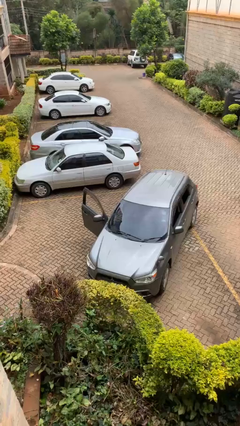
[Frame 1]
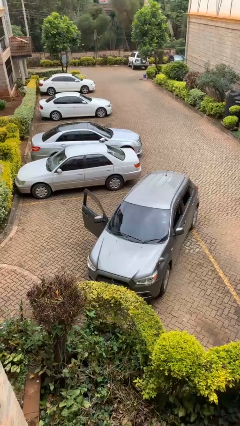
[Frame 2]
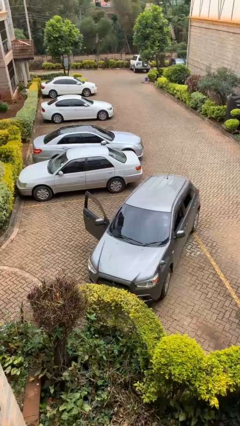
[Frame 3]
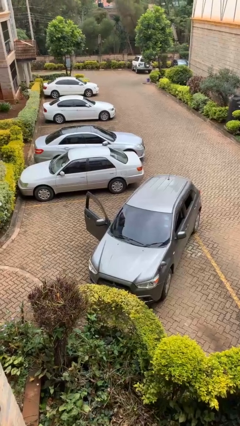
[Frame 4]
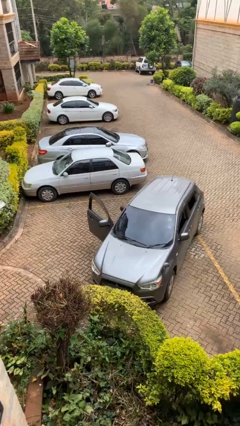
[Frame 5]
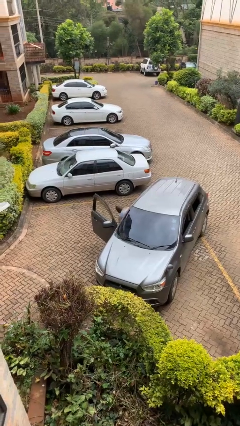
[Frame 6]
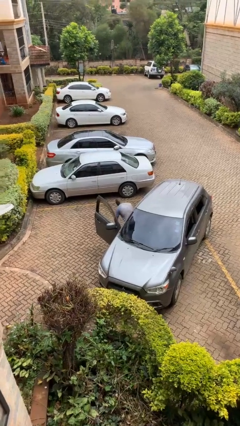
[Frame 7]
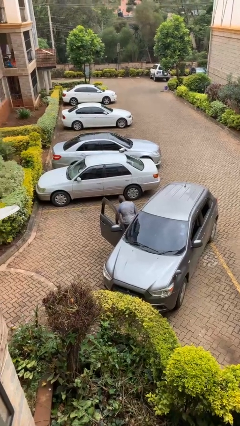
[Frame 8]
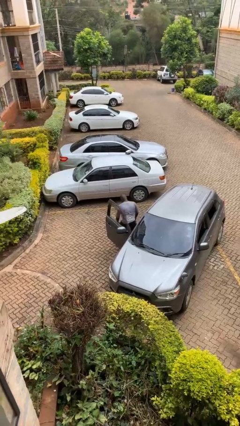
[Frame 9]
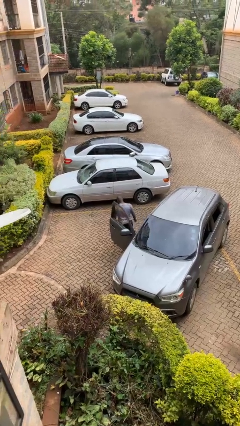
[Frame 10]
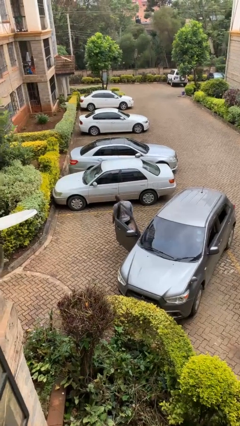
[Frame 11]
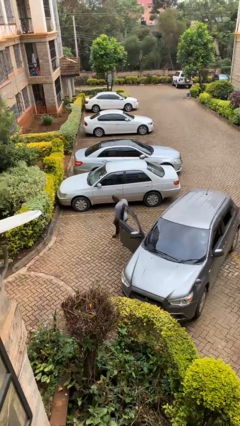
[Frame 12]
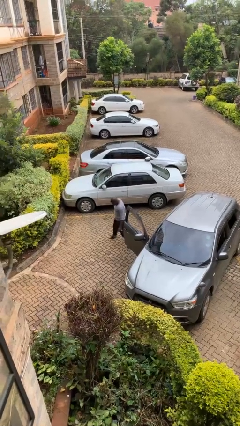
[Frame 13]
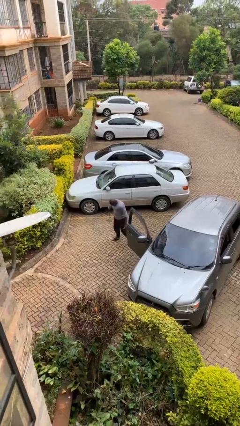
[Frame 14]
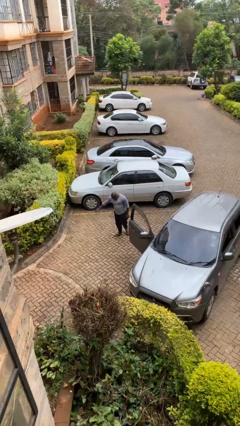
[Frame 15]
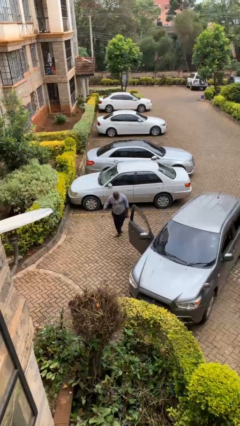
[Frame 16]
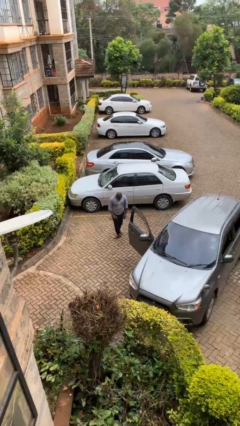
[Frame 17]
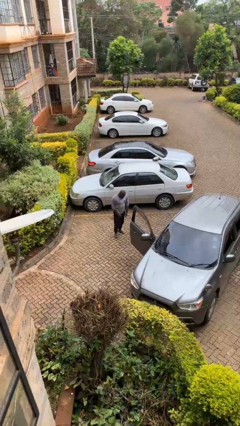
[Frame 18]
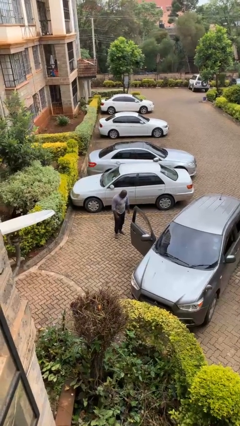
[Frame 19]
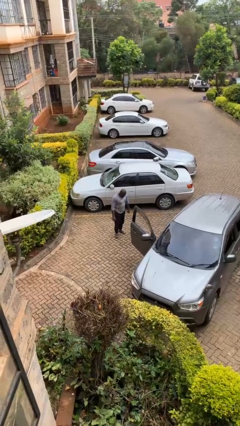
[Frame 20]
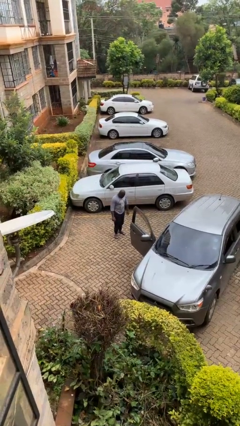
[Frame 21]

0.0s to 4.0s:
person exits car

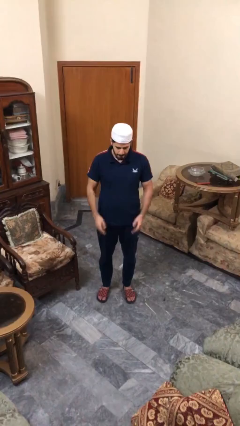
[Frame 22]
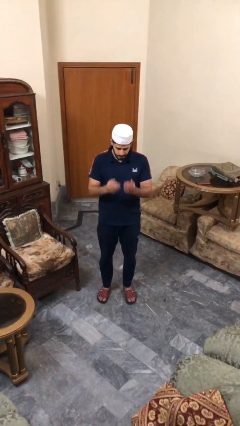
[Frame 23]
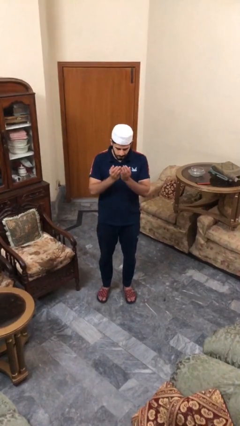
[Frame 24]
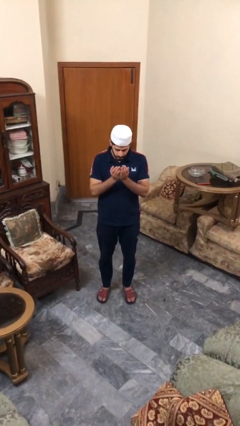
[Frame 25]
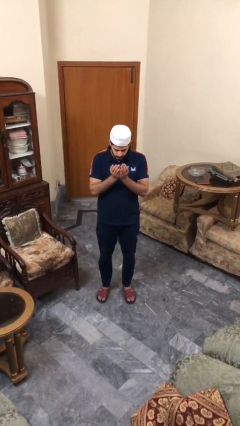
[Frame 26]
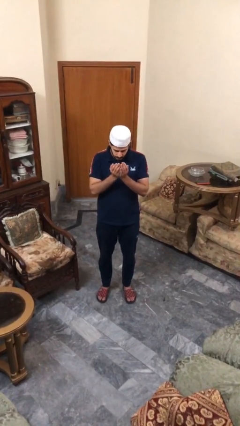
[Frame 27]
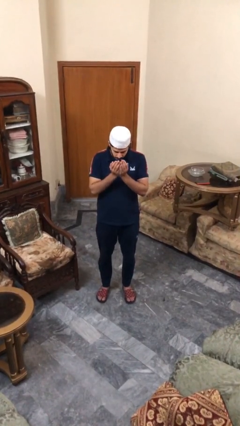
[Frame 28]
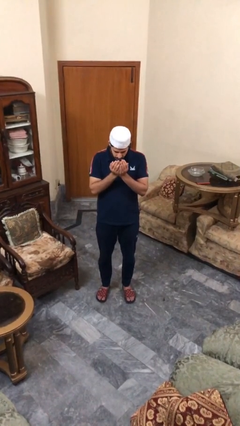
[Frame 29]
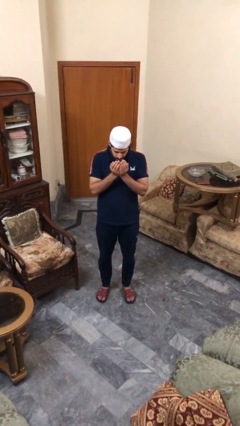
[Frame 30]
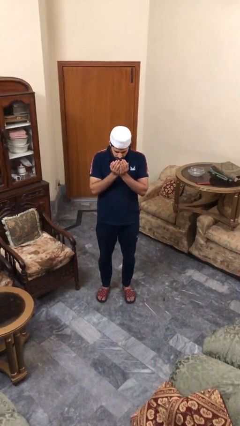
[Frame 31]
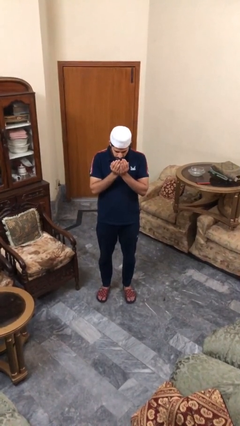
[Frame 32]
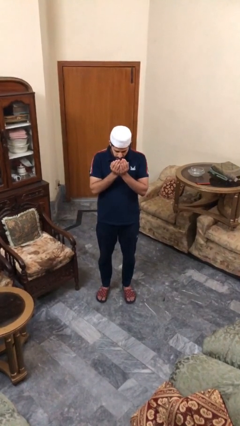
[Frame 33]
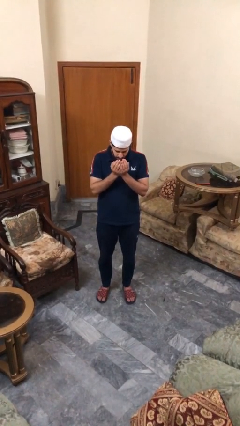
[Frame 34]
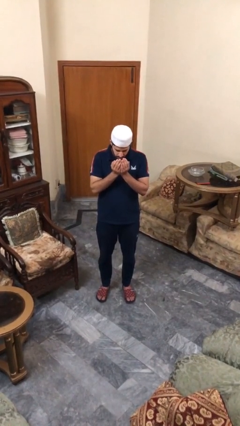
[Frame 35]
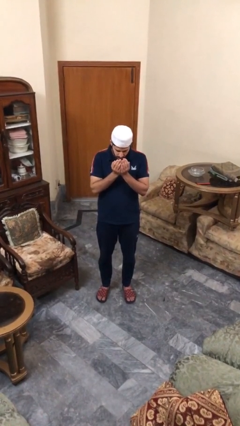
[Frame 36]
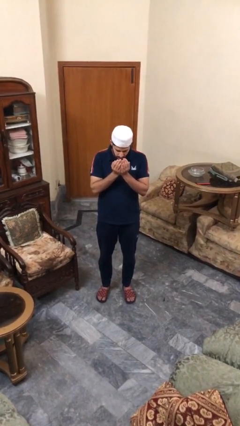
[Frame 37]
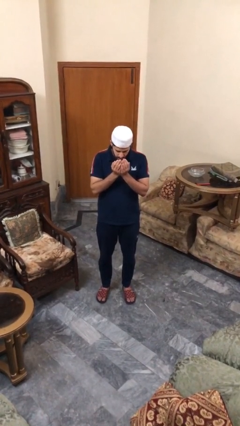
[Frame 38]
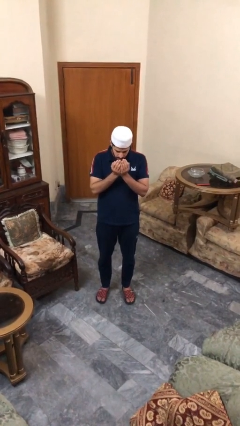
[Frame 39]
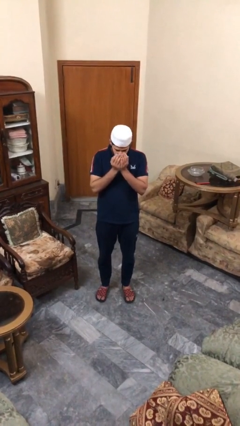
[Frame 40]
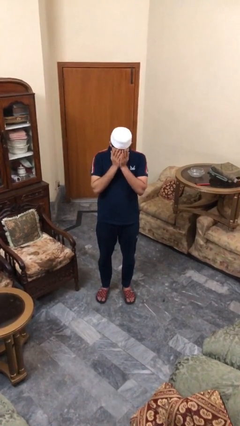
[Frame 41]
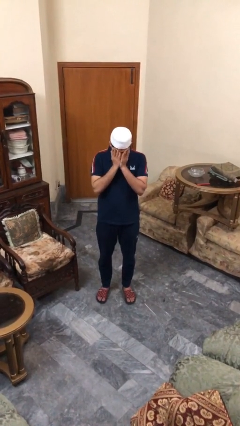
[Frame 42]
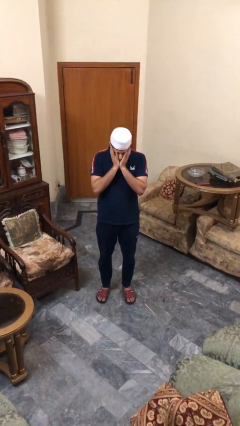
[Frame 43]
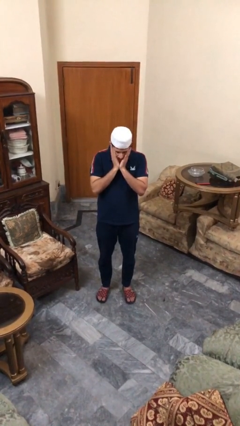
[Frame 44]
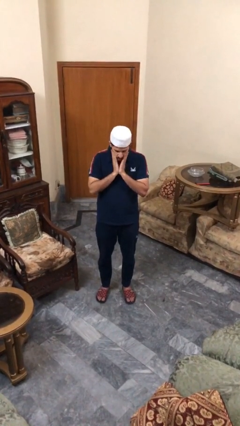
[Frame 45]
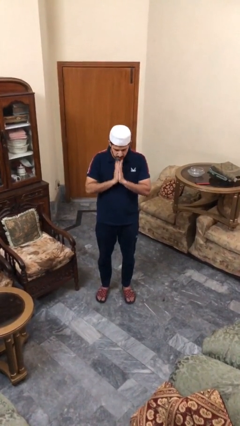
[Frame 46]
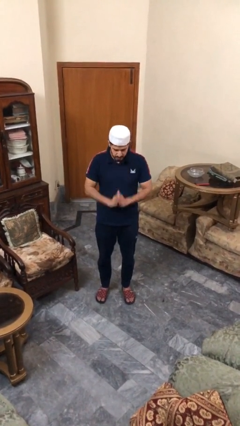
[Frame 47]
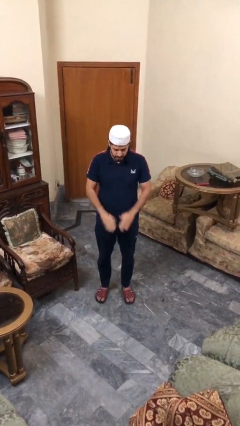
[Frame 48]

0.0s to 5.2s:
person prays

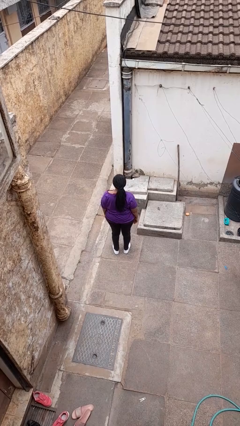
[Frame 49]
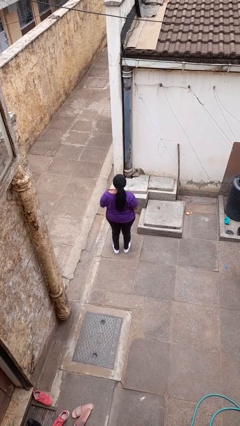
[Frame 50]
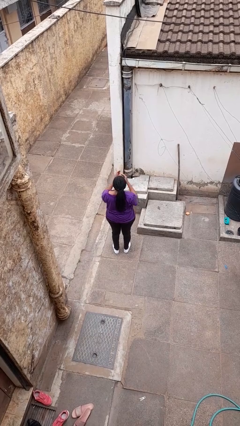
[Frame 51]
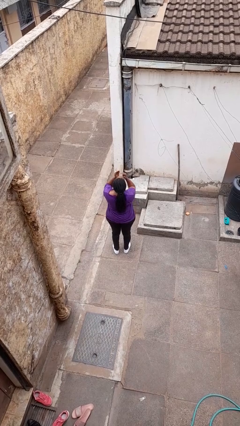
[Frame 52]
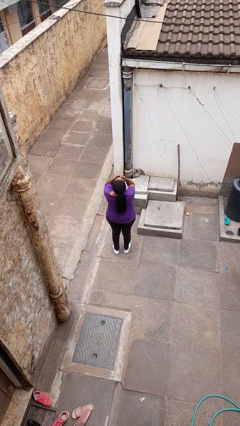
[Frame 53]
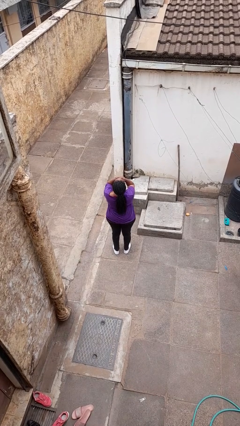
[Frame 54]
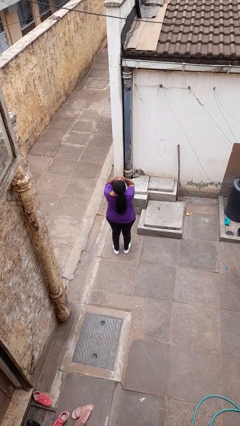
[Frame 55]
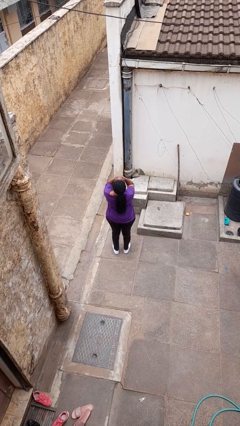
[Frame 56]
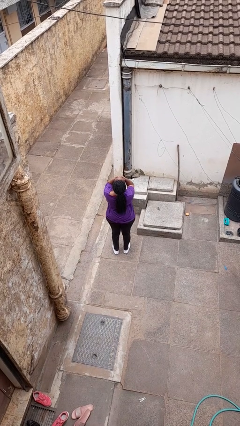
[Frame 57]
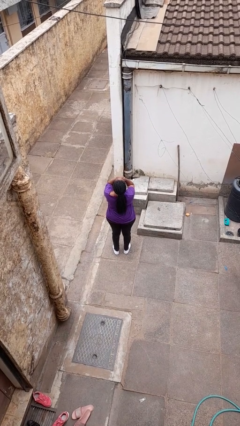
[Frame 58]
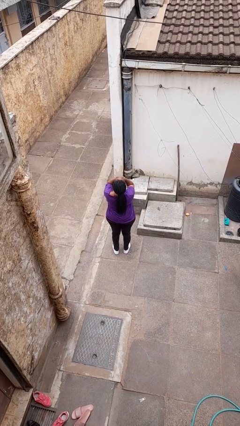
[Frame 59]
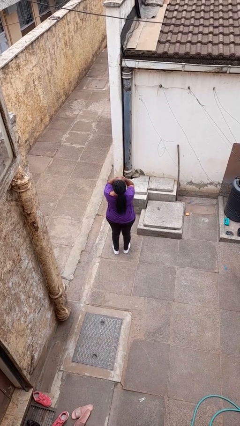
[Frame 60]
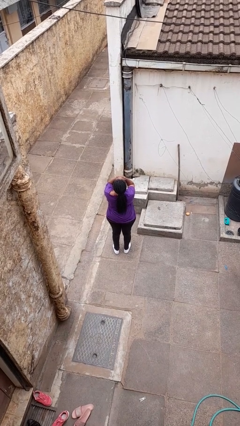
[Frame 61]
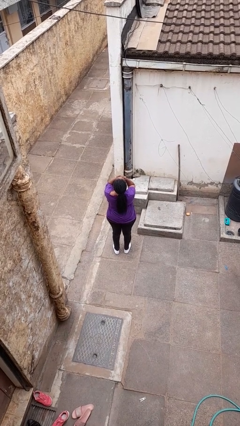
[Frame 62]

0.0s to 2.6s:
person covers face with hands

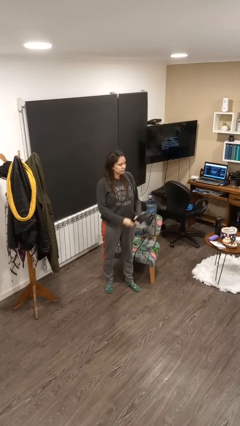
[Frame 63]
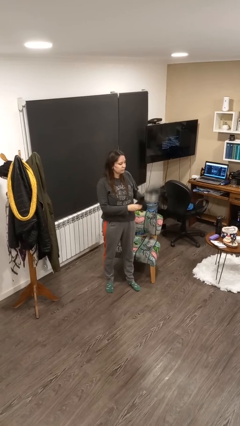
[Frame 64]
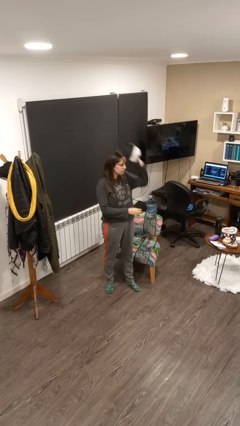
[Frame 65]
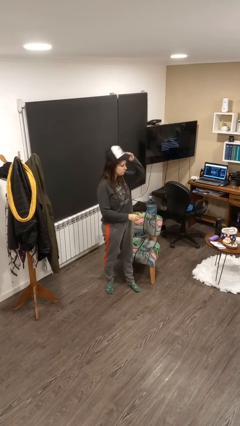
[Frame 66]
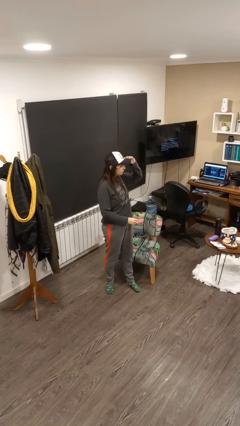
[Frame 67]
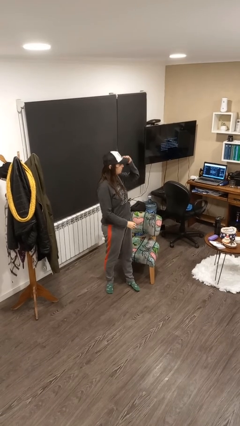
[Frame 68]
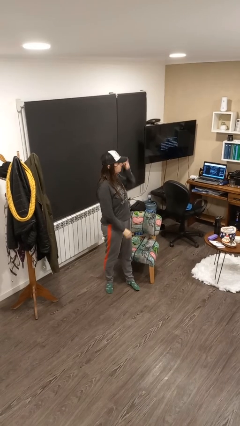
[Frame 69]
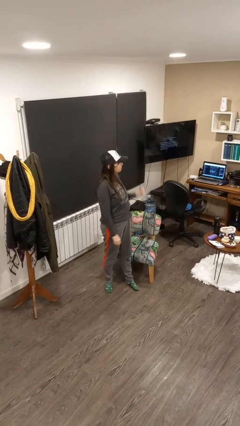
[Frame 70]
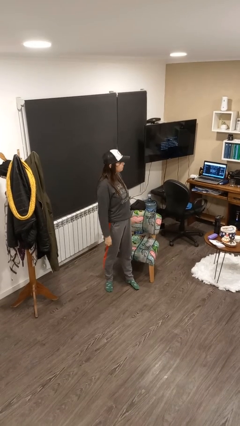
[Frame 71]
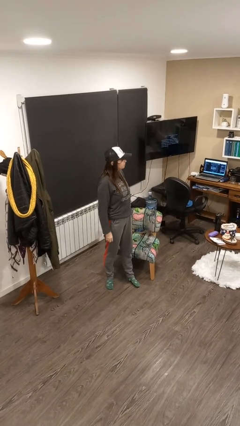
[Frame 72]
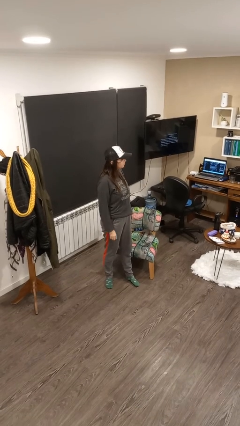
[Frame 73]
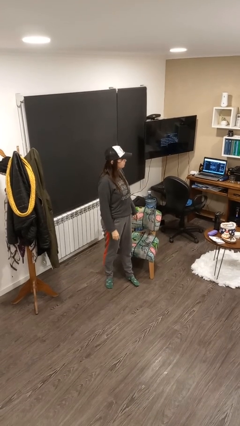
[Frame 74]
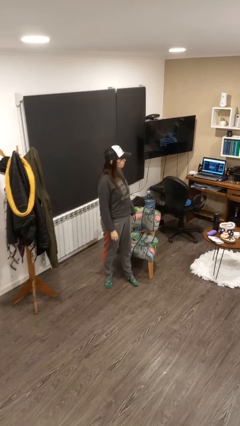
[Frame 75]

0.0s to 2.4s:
person puts on hat

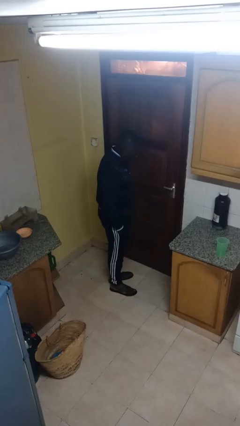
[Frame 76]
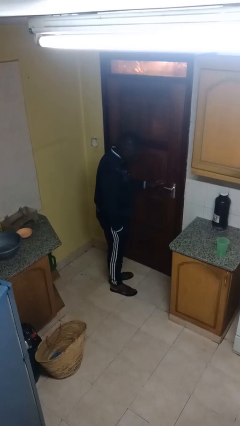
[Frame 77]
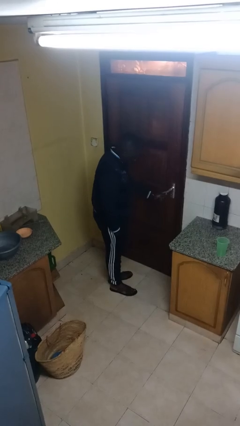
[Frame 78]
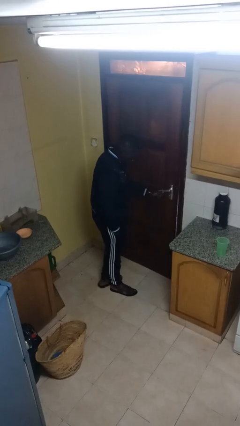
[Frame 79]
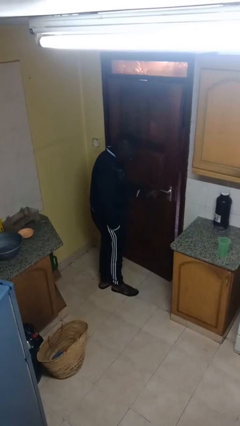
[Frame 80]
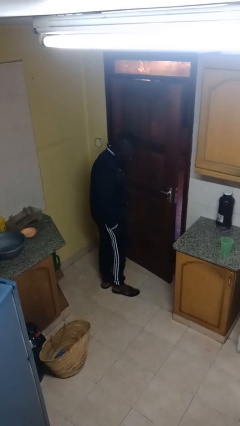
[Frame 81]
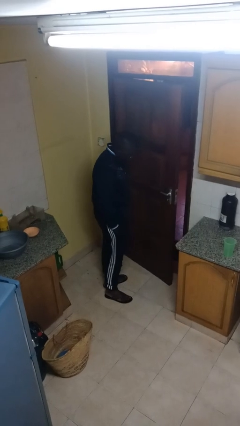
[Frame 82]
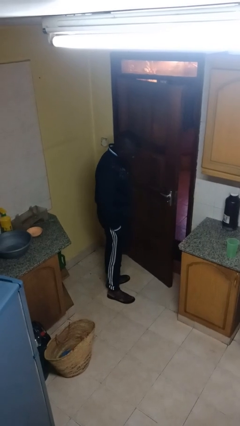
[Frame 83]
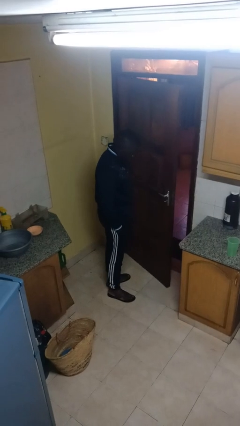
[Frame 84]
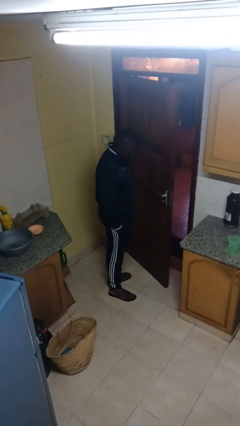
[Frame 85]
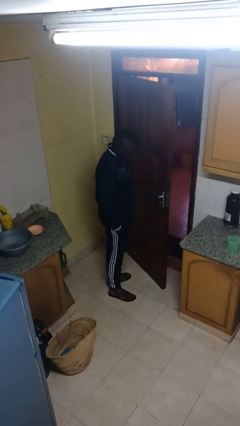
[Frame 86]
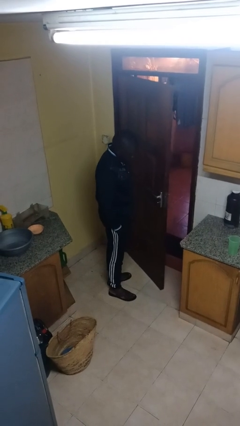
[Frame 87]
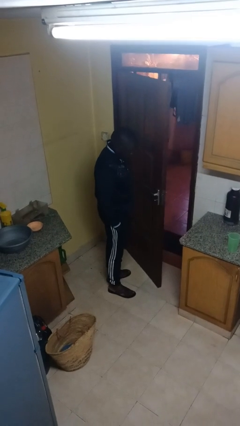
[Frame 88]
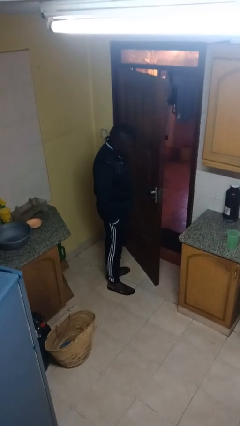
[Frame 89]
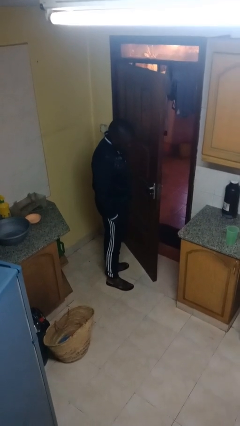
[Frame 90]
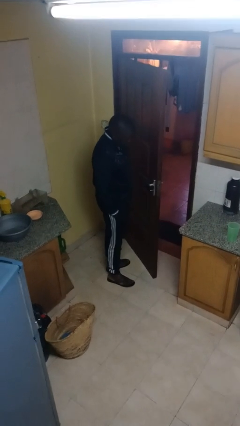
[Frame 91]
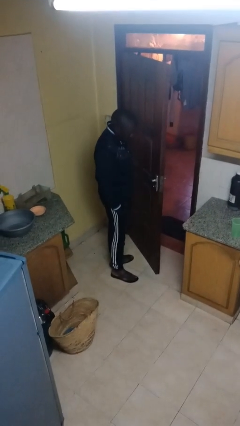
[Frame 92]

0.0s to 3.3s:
person opens facility door
